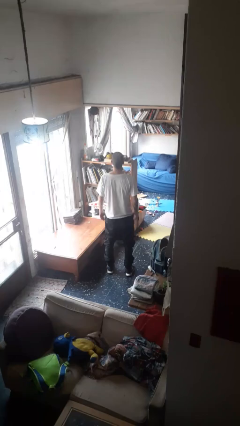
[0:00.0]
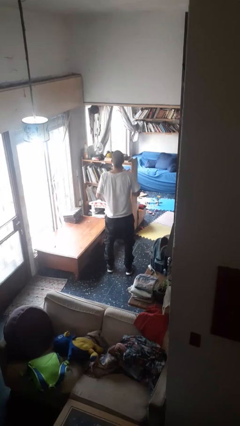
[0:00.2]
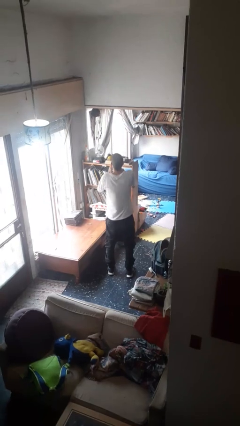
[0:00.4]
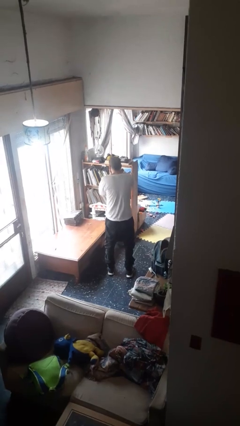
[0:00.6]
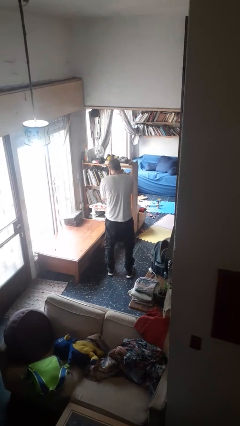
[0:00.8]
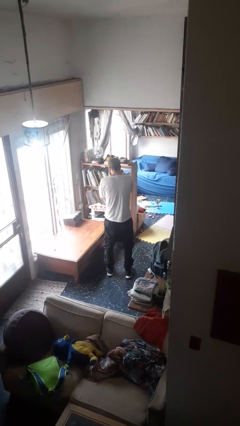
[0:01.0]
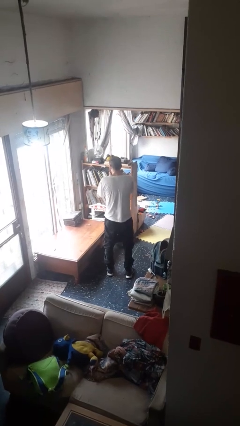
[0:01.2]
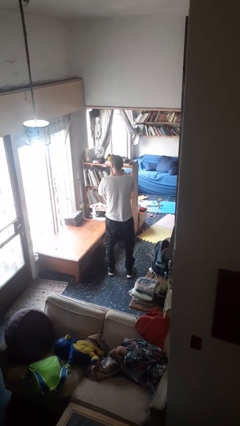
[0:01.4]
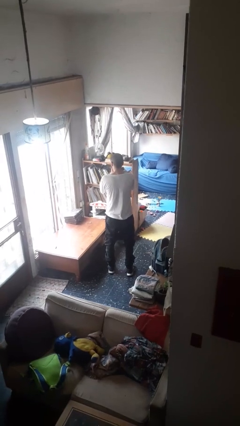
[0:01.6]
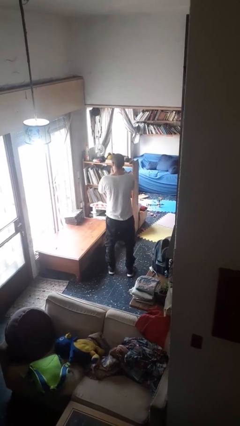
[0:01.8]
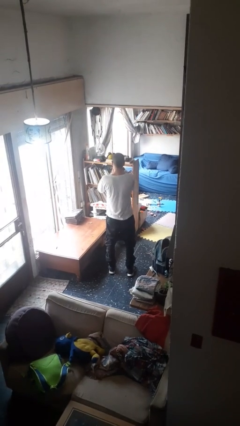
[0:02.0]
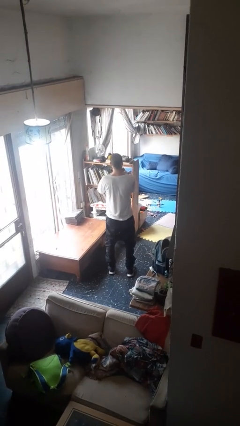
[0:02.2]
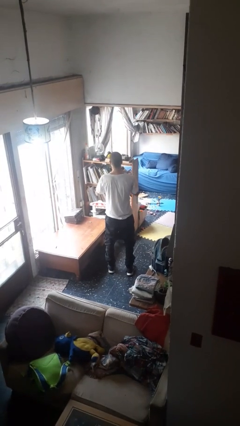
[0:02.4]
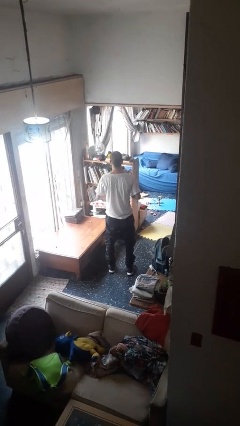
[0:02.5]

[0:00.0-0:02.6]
person sneezes into hand

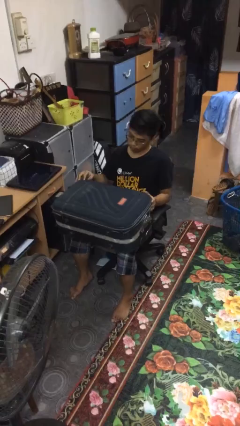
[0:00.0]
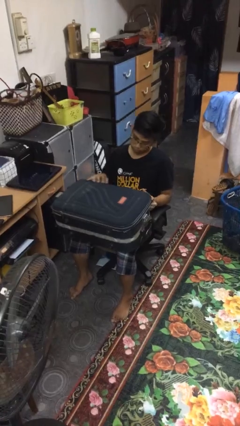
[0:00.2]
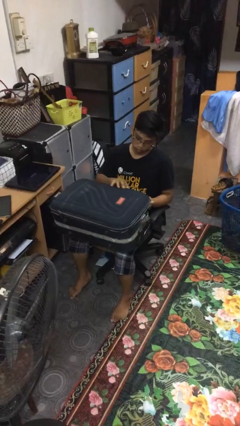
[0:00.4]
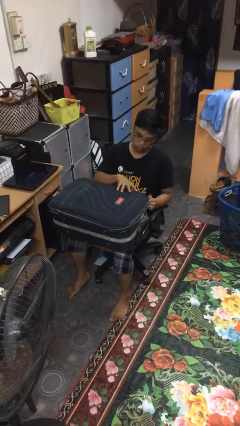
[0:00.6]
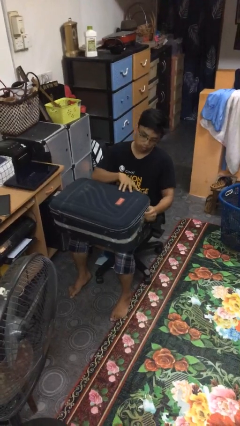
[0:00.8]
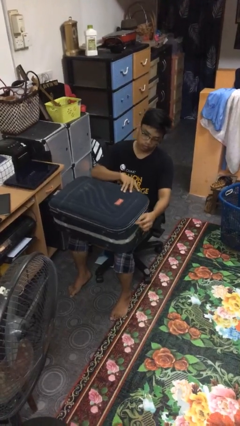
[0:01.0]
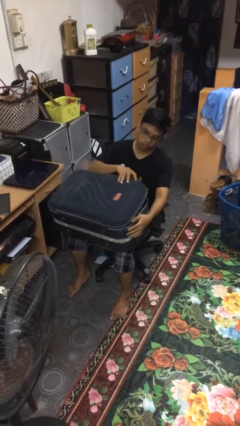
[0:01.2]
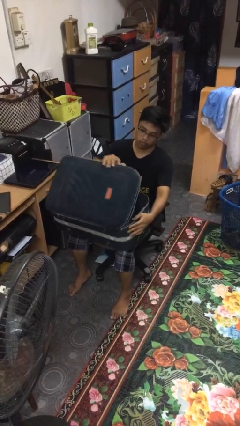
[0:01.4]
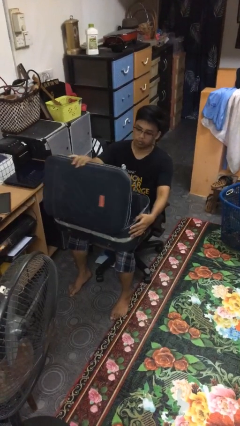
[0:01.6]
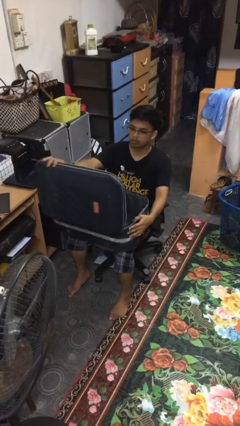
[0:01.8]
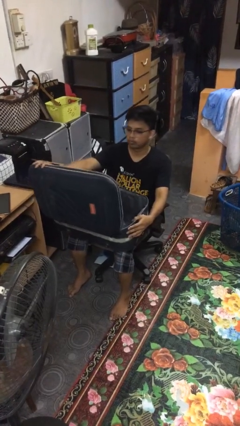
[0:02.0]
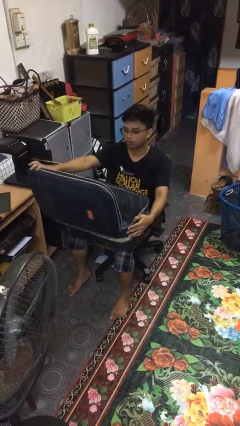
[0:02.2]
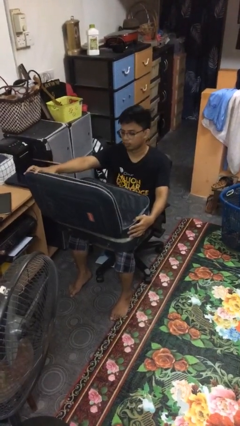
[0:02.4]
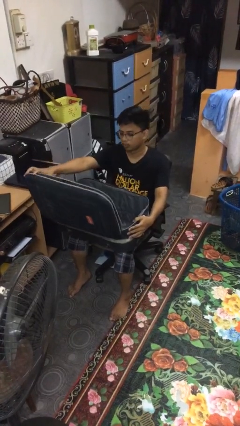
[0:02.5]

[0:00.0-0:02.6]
person opens suitcase

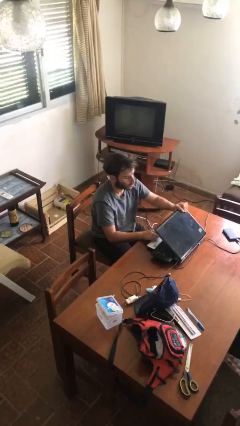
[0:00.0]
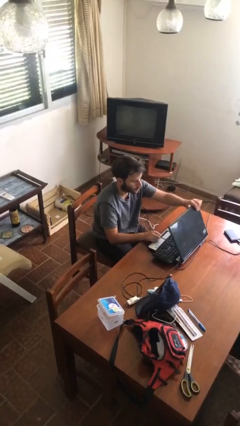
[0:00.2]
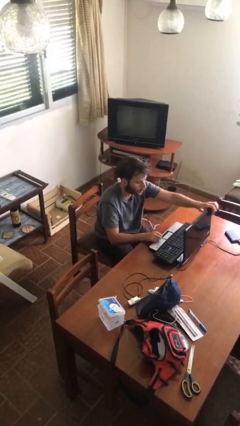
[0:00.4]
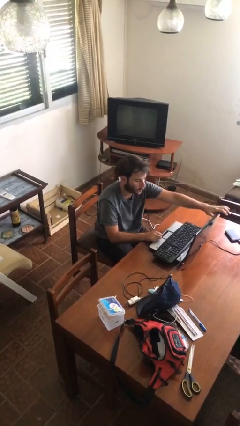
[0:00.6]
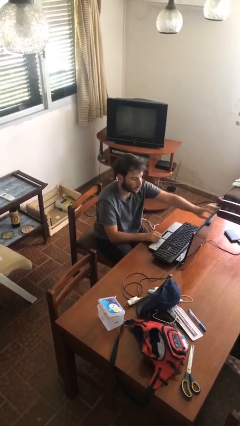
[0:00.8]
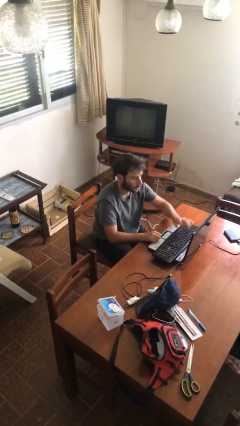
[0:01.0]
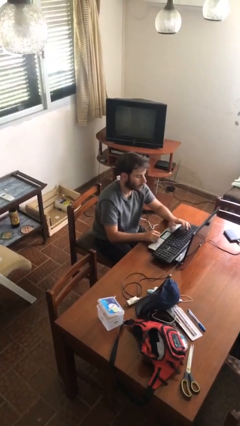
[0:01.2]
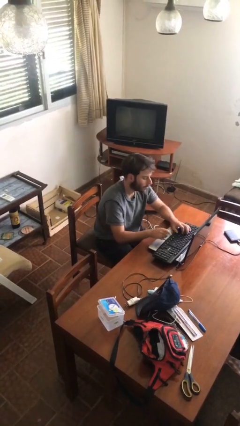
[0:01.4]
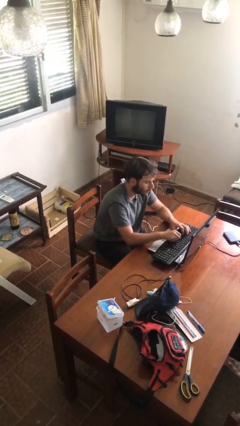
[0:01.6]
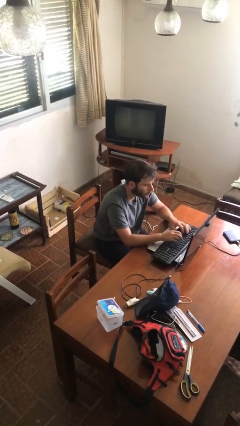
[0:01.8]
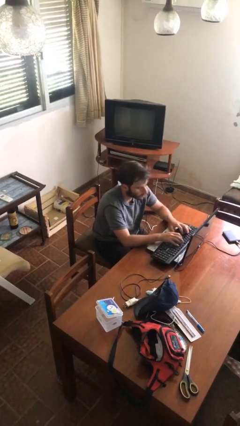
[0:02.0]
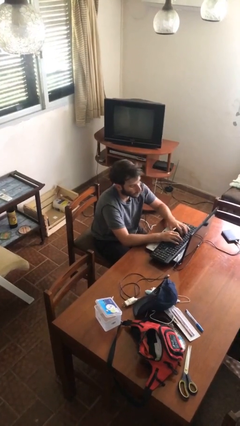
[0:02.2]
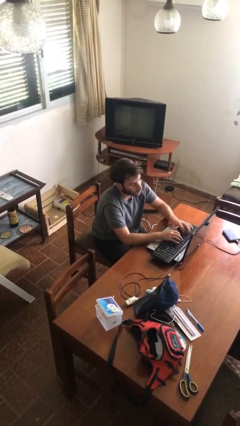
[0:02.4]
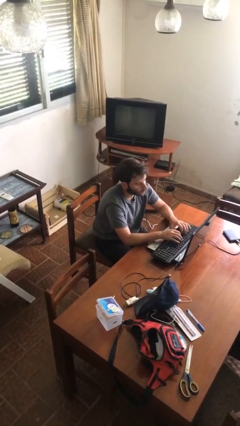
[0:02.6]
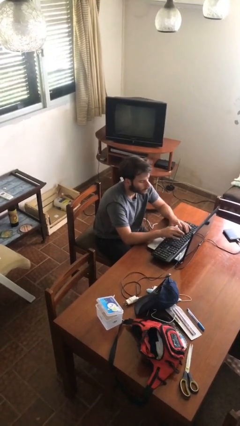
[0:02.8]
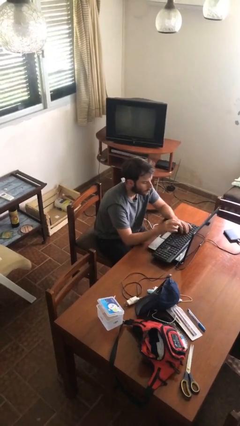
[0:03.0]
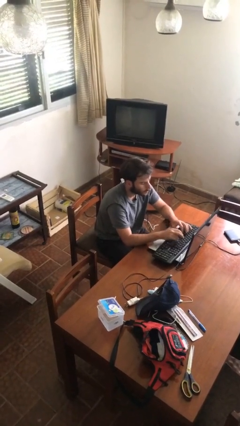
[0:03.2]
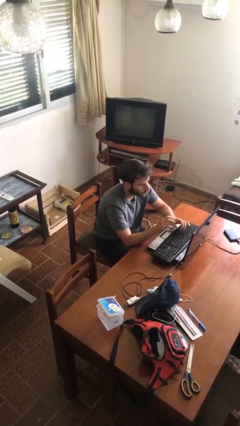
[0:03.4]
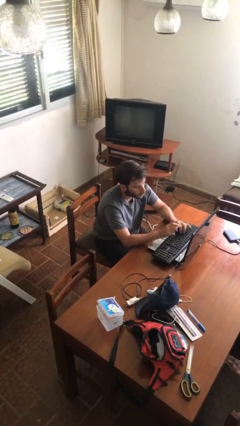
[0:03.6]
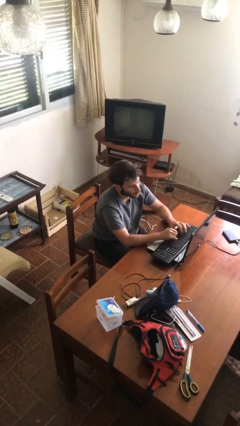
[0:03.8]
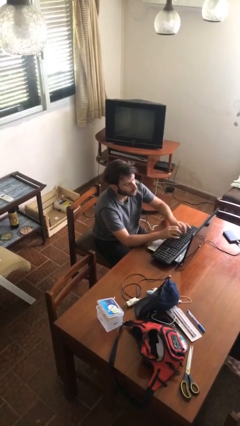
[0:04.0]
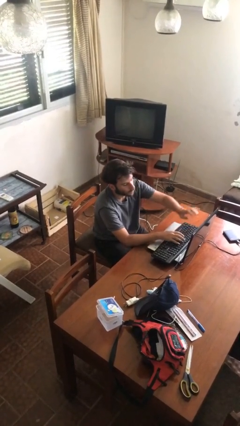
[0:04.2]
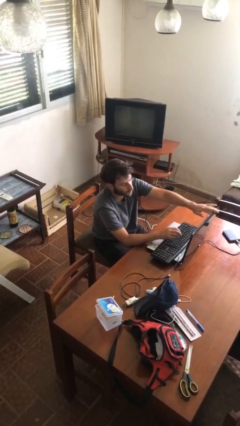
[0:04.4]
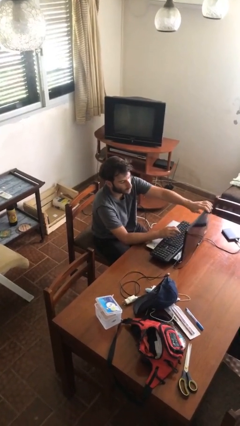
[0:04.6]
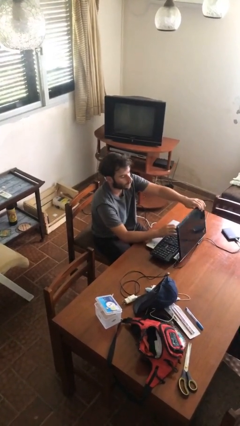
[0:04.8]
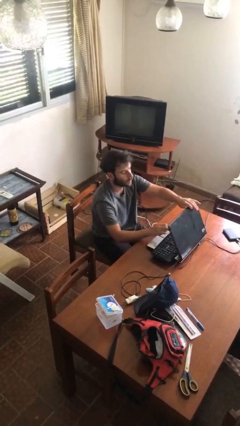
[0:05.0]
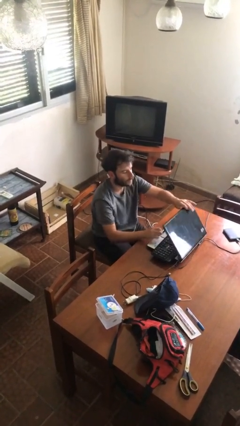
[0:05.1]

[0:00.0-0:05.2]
person interacts with laptop

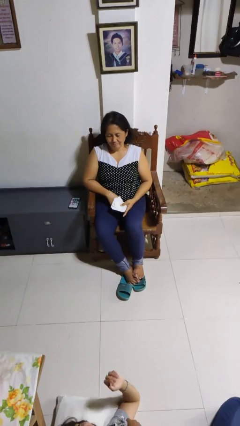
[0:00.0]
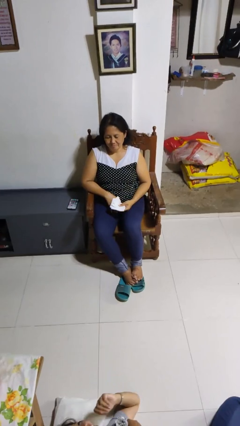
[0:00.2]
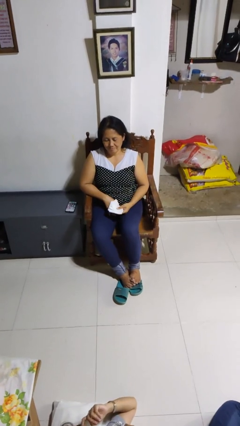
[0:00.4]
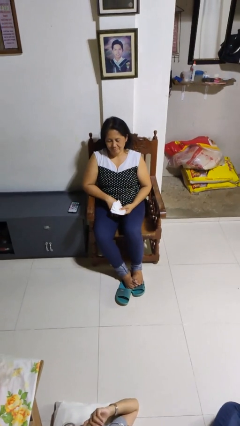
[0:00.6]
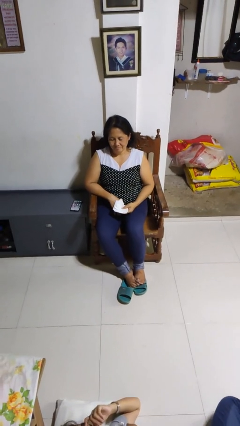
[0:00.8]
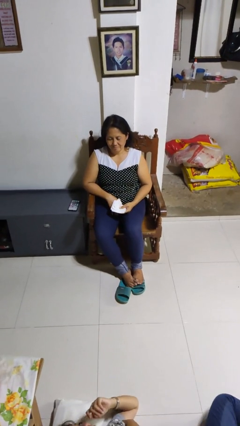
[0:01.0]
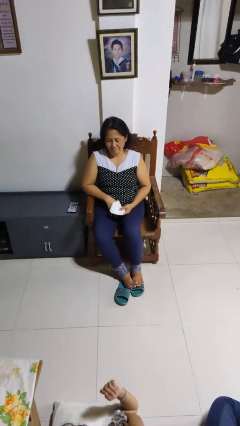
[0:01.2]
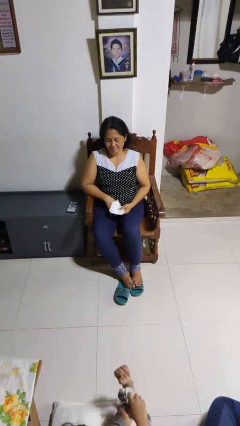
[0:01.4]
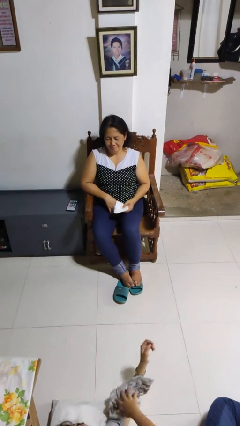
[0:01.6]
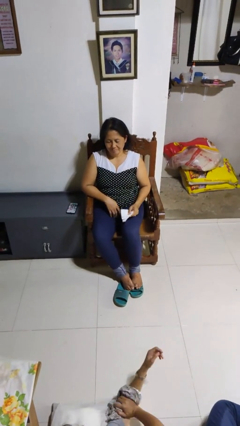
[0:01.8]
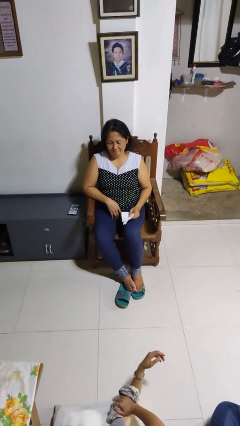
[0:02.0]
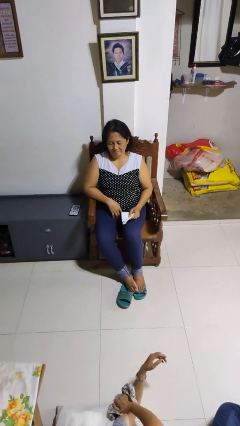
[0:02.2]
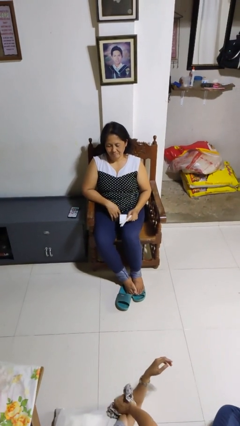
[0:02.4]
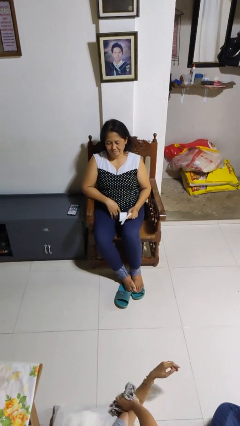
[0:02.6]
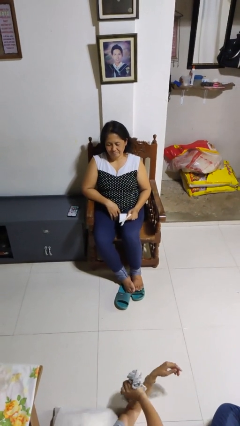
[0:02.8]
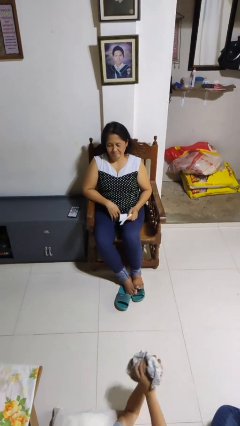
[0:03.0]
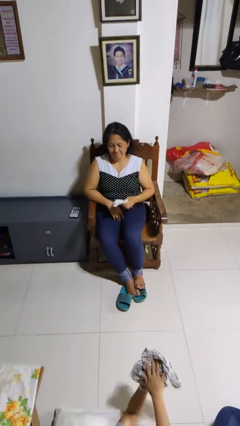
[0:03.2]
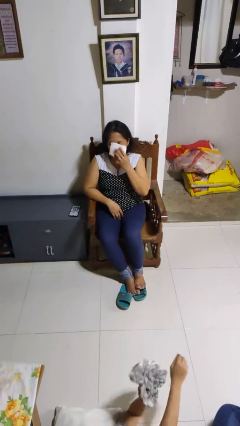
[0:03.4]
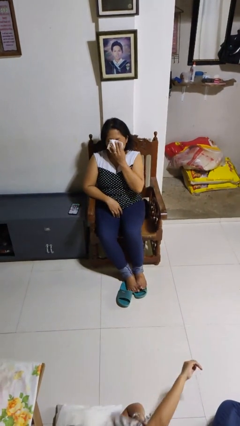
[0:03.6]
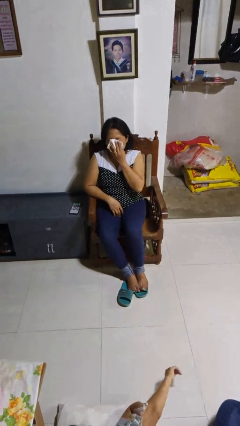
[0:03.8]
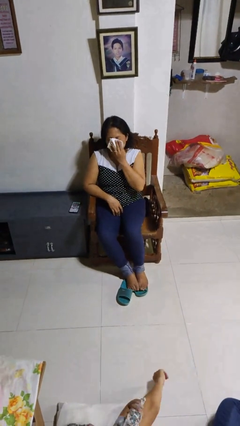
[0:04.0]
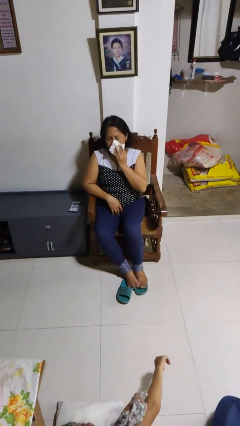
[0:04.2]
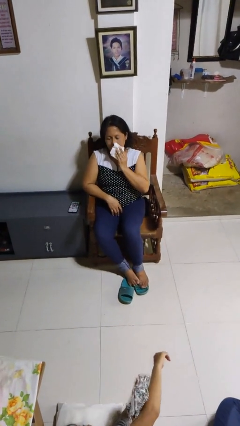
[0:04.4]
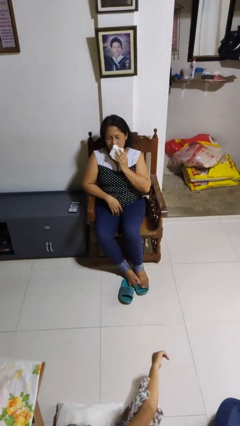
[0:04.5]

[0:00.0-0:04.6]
person wipes mouth with napkin

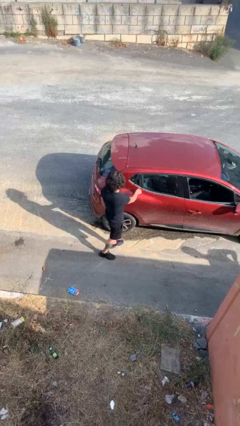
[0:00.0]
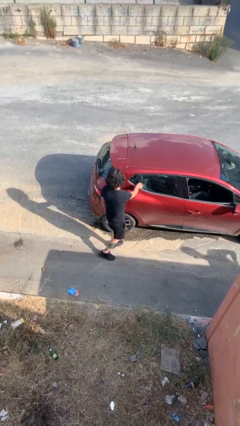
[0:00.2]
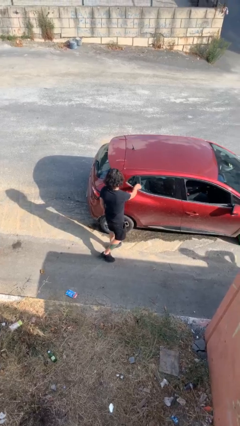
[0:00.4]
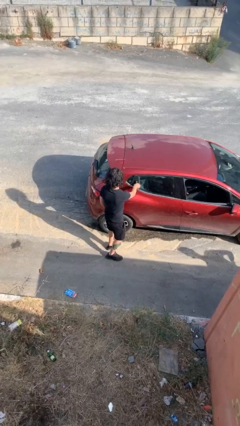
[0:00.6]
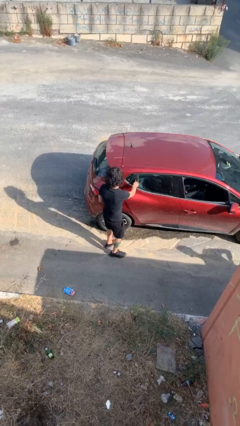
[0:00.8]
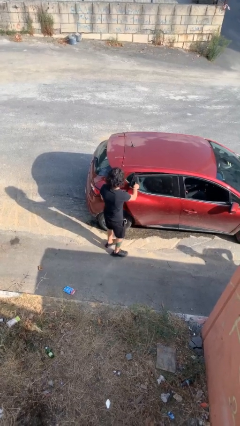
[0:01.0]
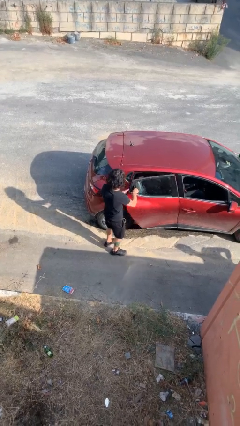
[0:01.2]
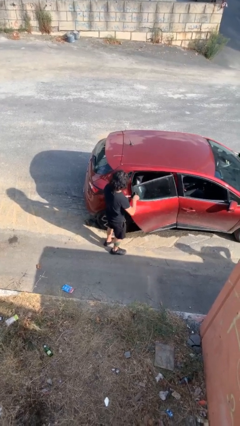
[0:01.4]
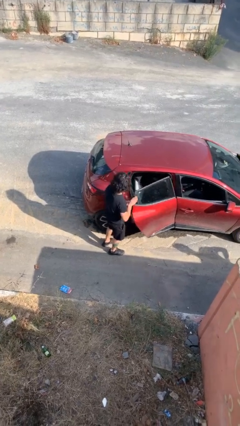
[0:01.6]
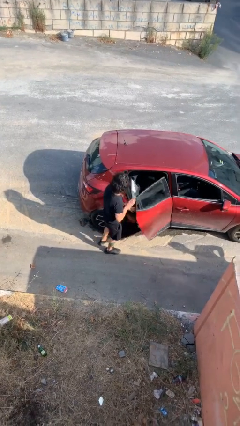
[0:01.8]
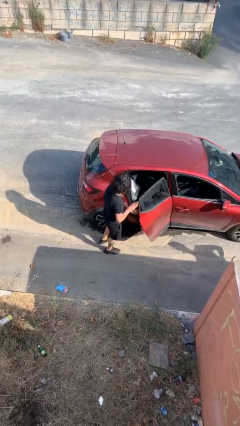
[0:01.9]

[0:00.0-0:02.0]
person opens car door

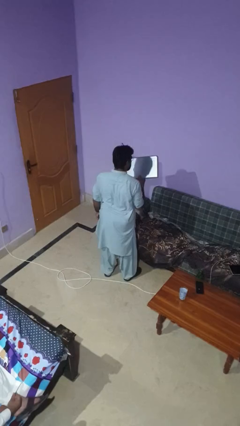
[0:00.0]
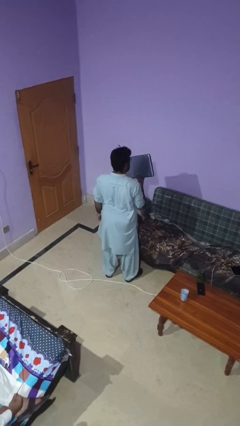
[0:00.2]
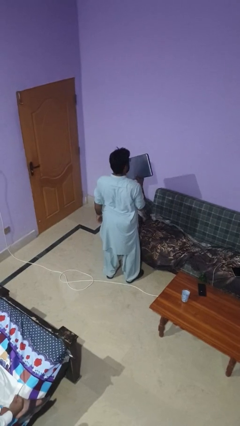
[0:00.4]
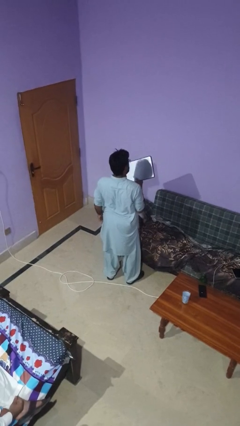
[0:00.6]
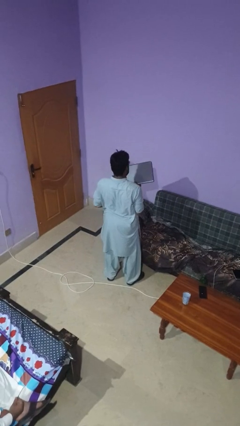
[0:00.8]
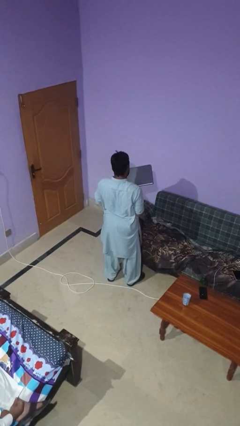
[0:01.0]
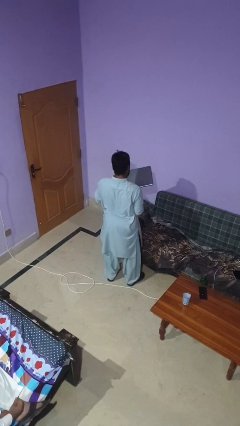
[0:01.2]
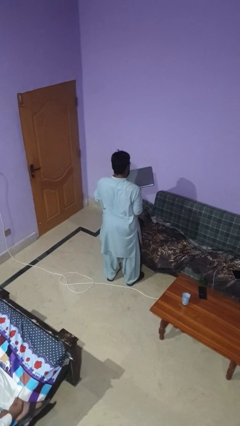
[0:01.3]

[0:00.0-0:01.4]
person picks up object from couch
